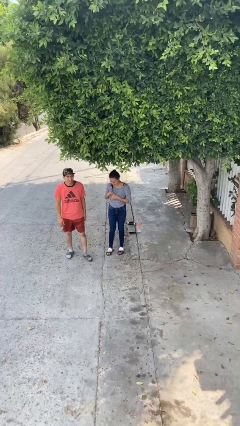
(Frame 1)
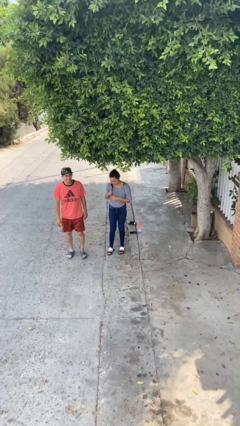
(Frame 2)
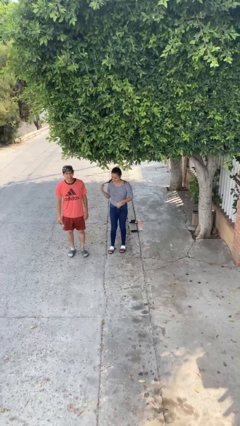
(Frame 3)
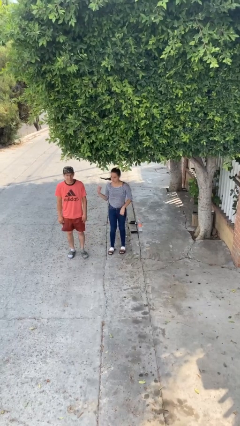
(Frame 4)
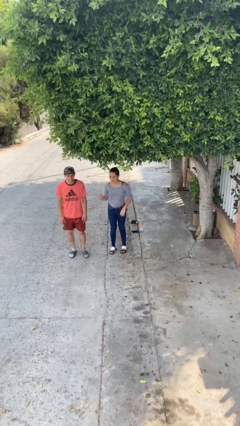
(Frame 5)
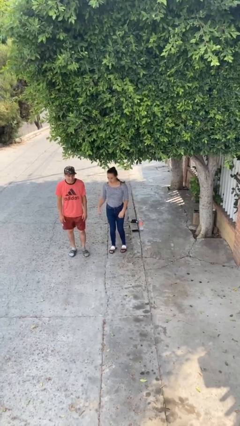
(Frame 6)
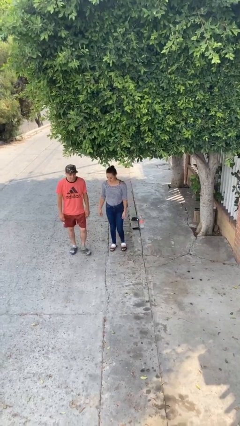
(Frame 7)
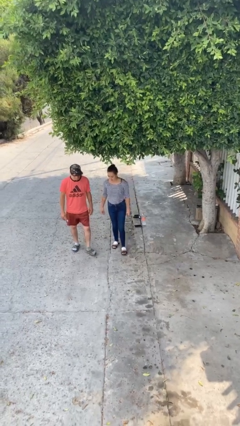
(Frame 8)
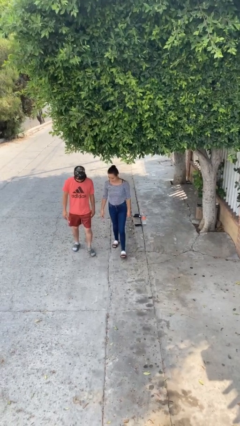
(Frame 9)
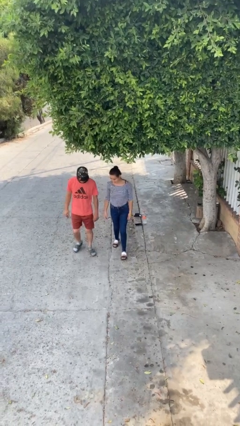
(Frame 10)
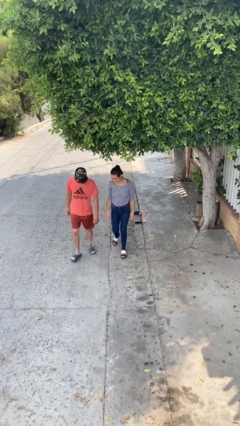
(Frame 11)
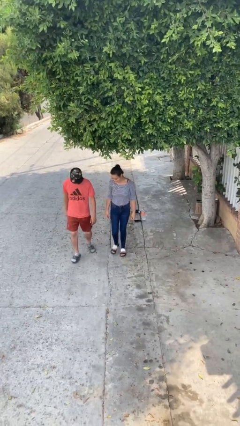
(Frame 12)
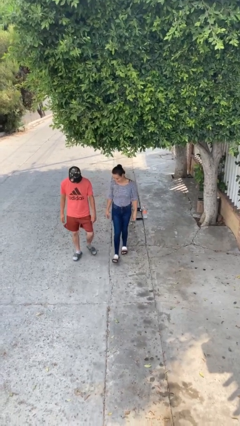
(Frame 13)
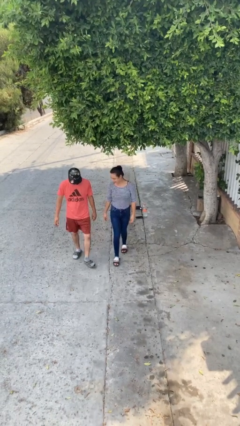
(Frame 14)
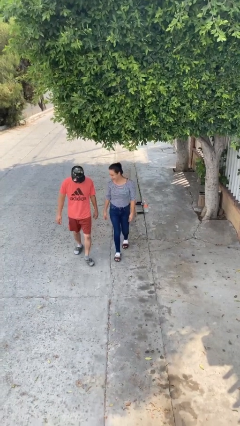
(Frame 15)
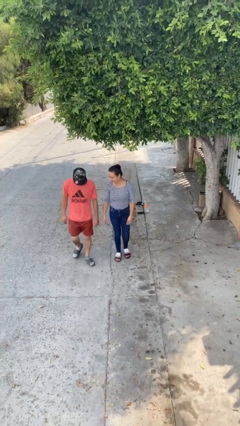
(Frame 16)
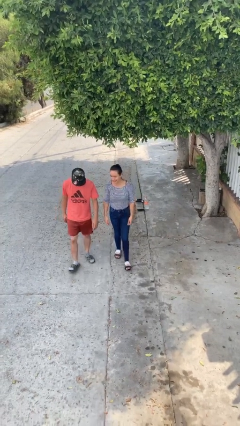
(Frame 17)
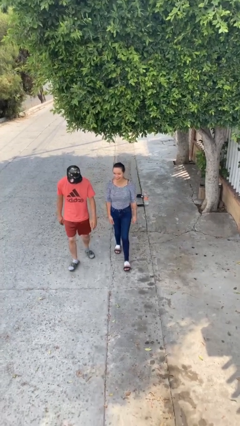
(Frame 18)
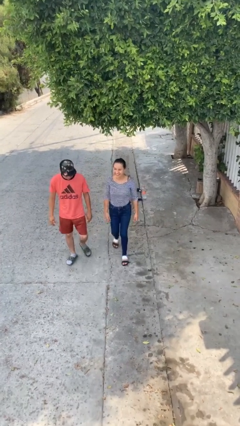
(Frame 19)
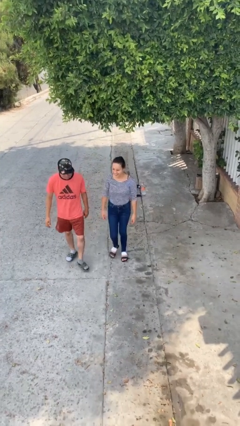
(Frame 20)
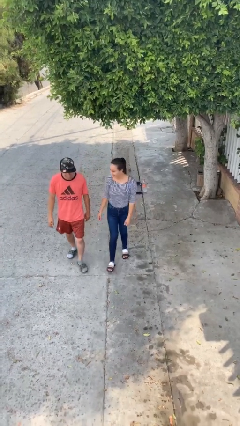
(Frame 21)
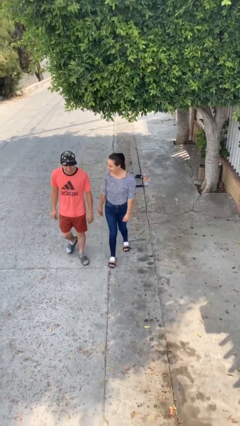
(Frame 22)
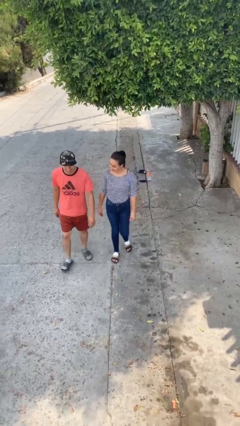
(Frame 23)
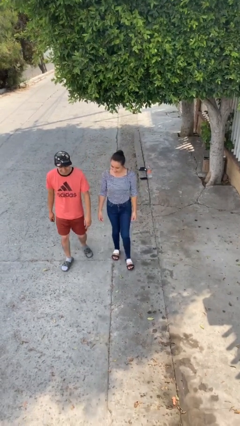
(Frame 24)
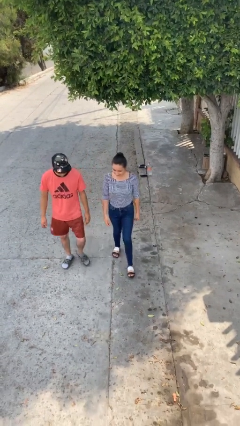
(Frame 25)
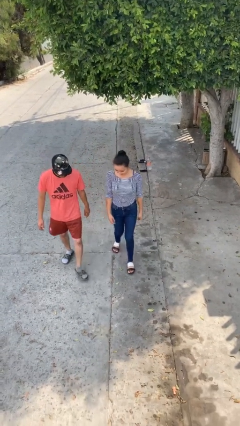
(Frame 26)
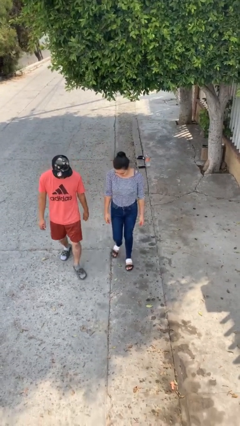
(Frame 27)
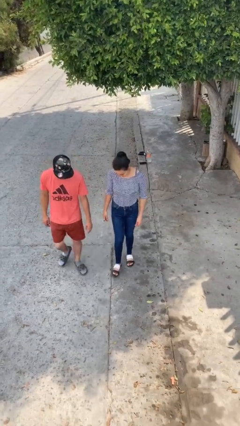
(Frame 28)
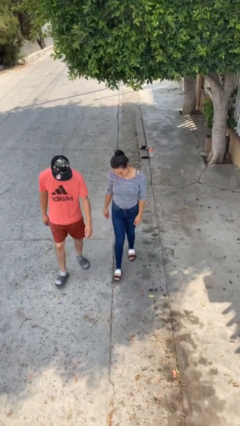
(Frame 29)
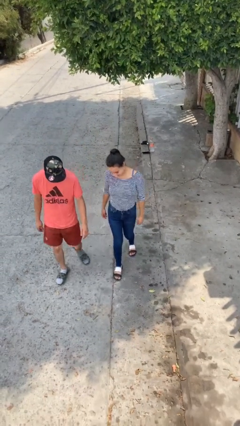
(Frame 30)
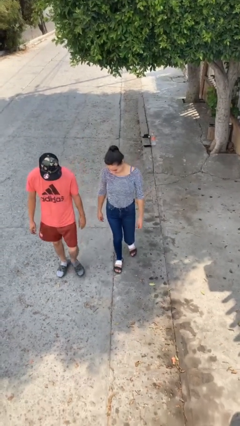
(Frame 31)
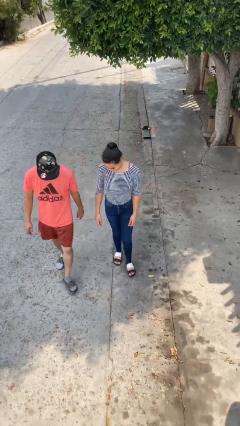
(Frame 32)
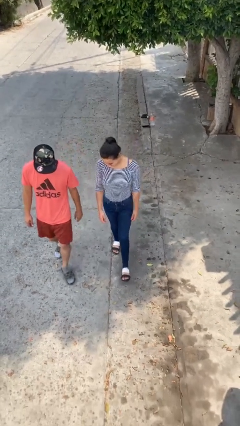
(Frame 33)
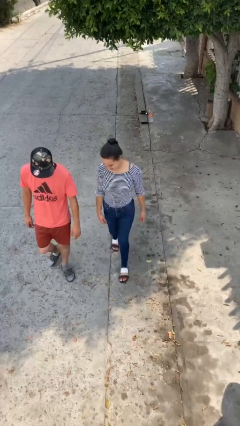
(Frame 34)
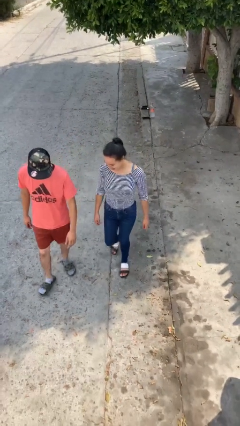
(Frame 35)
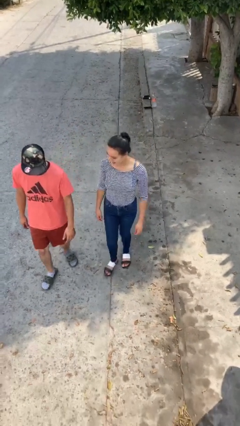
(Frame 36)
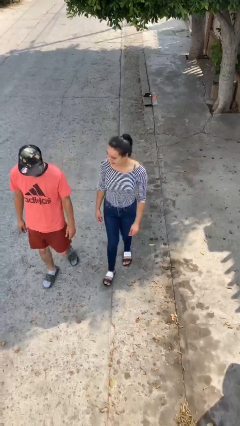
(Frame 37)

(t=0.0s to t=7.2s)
person talks to person

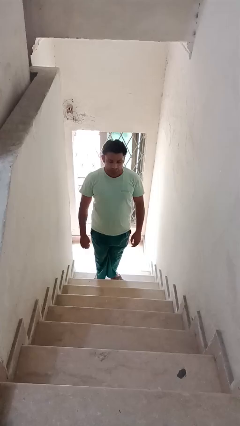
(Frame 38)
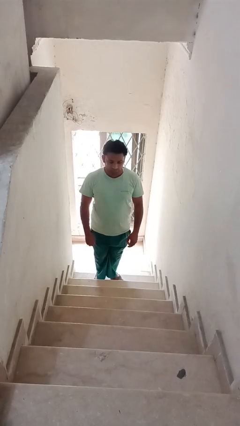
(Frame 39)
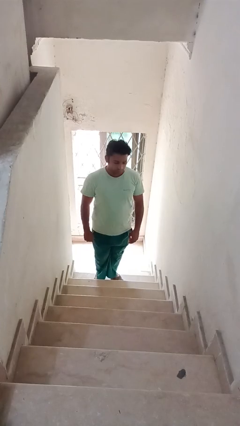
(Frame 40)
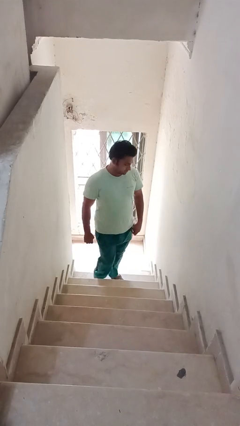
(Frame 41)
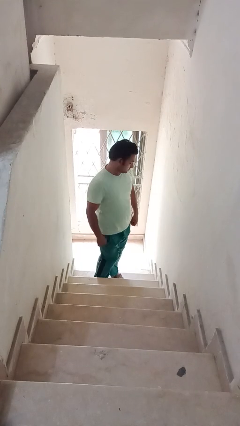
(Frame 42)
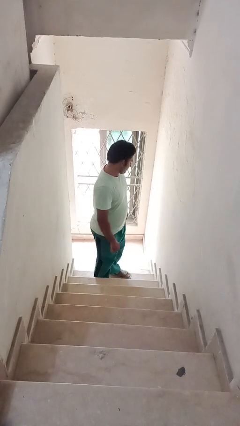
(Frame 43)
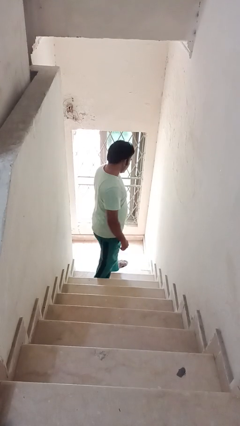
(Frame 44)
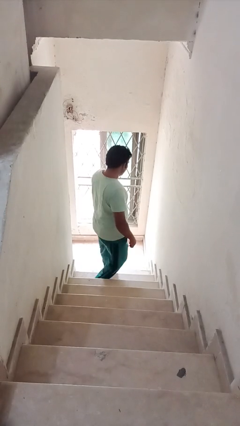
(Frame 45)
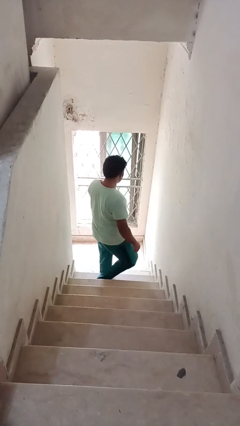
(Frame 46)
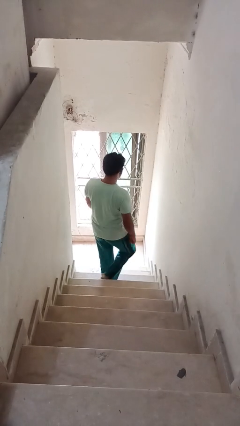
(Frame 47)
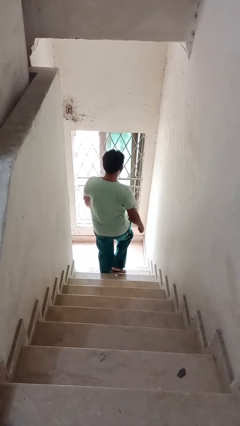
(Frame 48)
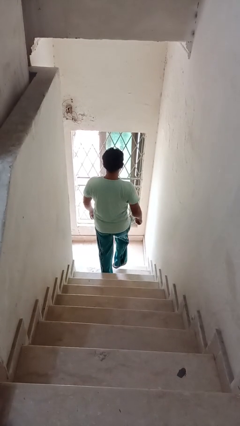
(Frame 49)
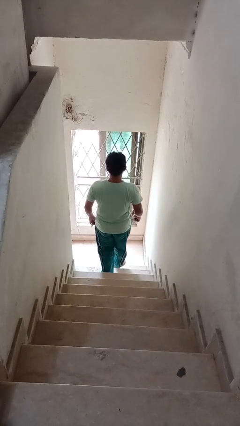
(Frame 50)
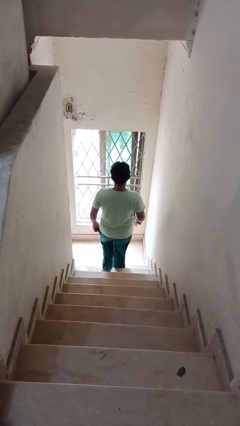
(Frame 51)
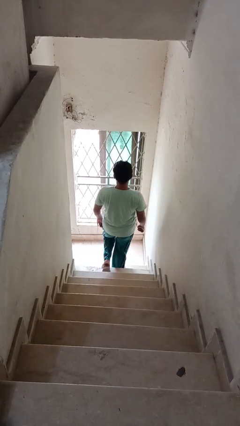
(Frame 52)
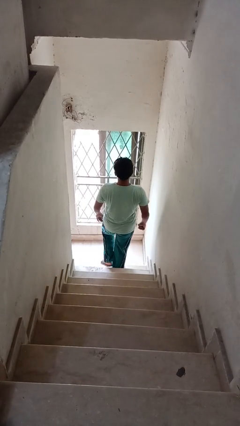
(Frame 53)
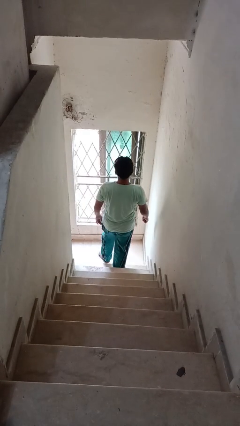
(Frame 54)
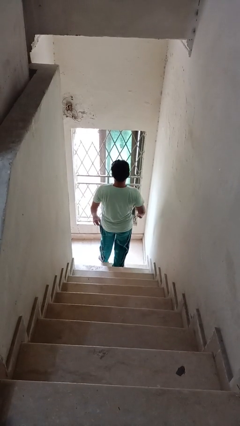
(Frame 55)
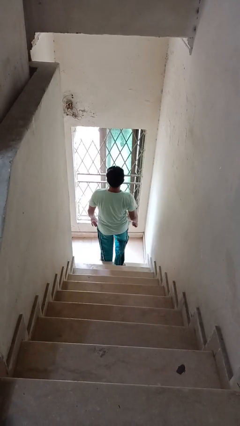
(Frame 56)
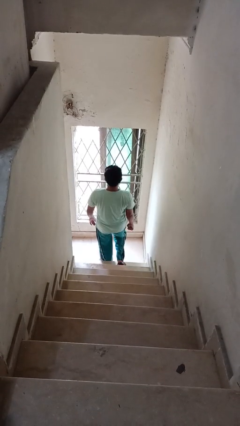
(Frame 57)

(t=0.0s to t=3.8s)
person climbs down stairs

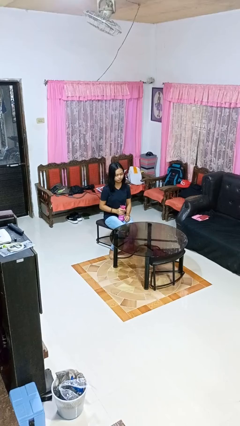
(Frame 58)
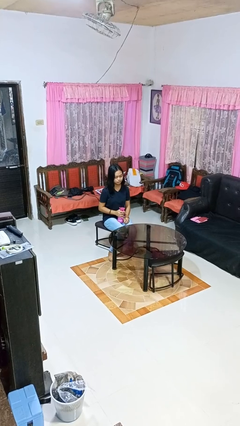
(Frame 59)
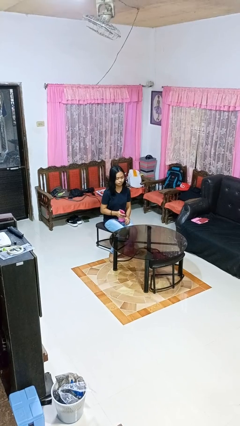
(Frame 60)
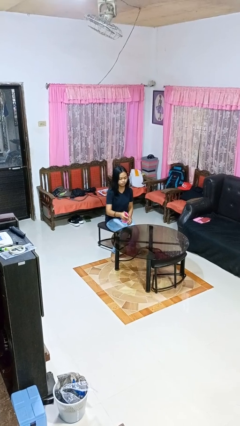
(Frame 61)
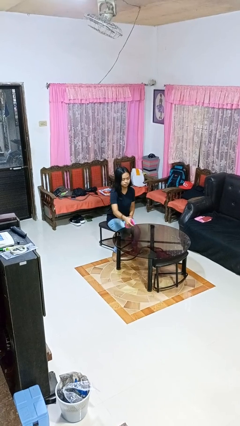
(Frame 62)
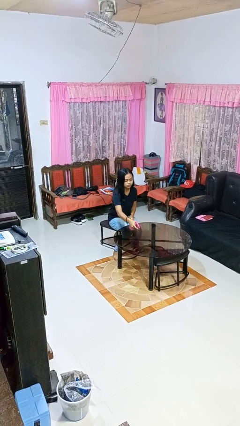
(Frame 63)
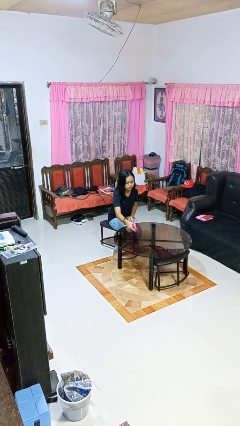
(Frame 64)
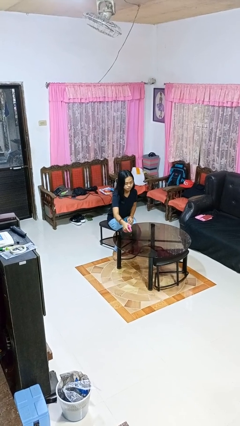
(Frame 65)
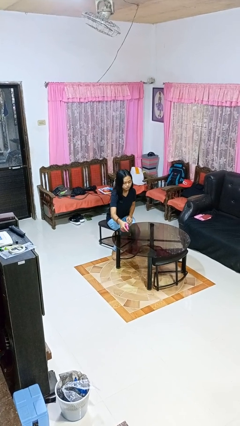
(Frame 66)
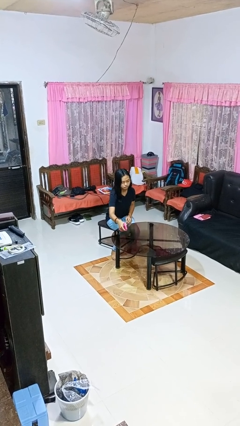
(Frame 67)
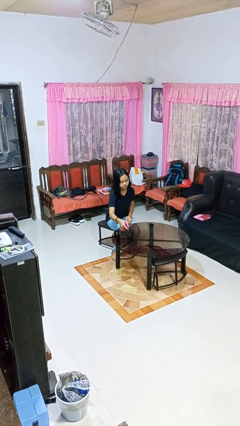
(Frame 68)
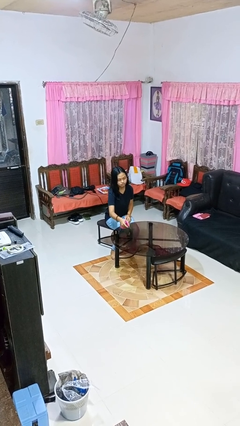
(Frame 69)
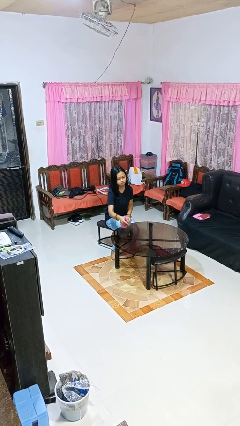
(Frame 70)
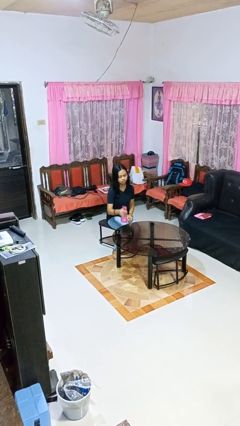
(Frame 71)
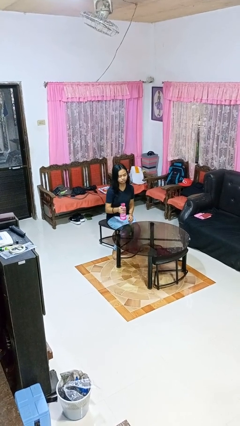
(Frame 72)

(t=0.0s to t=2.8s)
person sprays from bottle

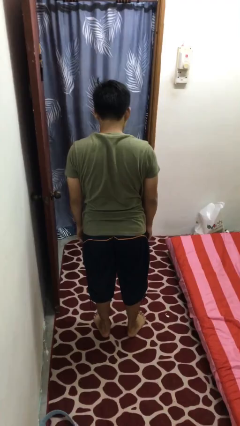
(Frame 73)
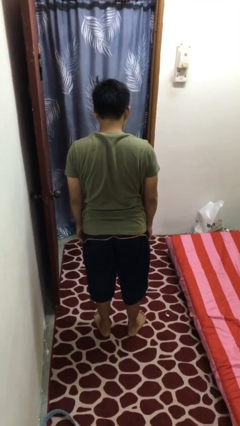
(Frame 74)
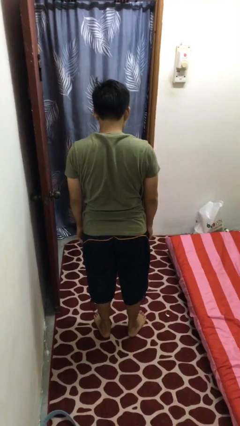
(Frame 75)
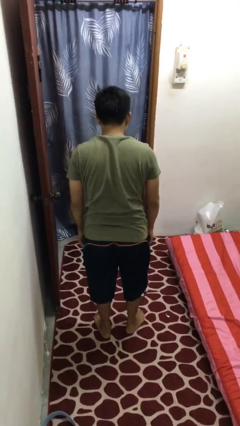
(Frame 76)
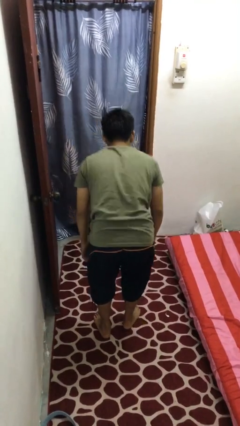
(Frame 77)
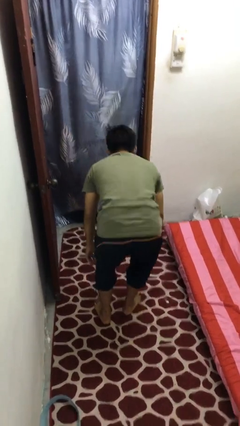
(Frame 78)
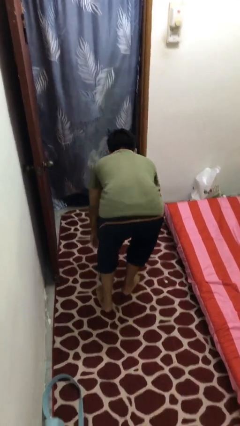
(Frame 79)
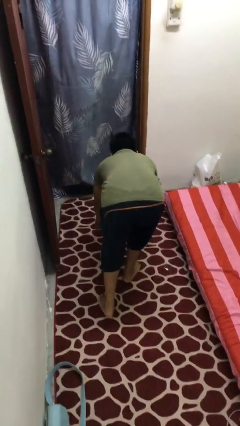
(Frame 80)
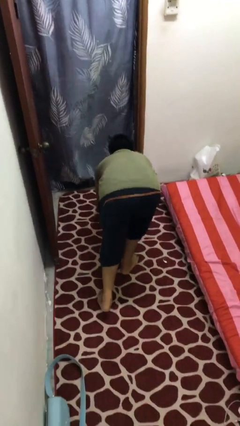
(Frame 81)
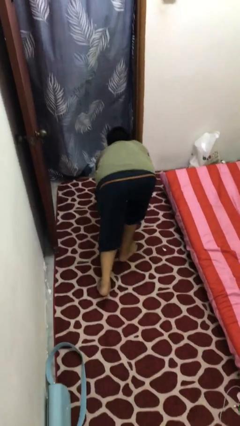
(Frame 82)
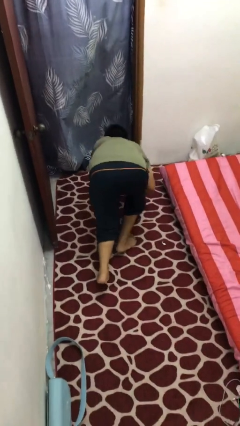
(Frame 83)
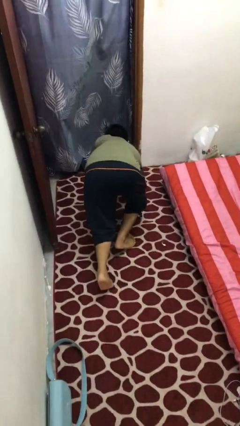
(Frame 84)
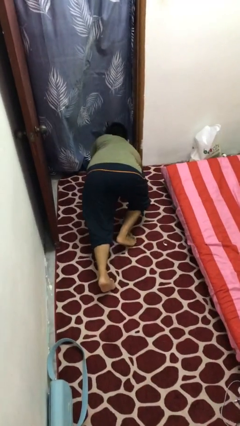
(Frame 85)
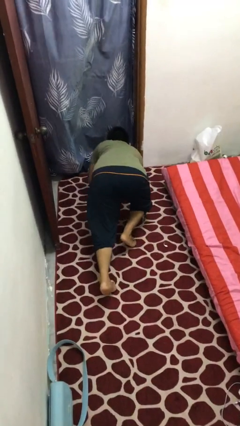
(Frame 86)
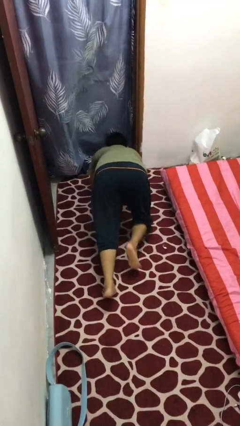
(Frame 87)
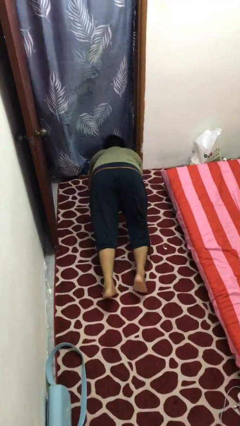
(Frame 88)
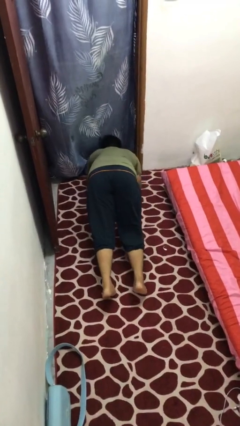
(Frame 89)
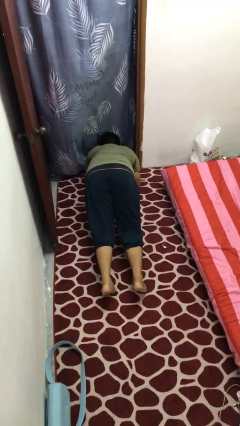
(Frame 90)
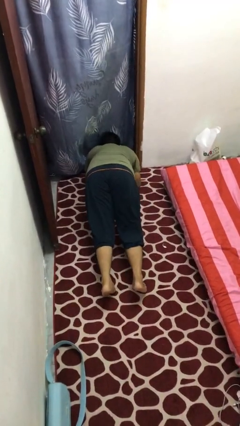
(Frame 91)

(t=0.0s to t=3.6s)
person exercises with plank

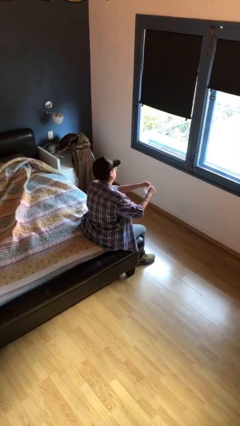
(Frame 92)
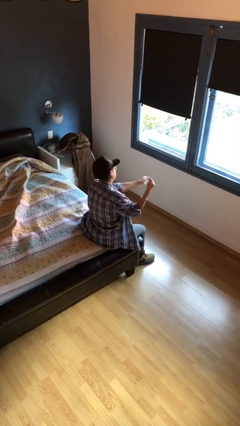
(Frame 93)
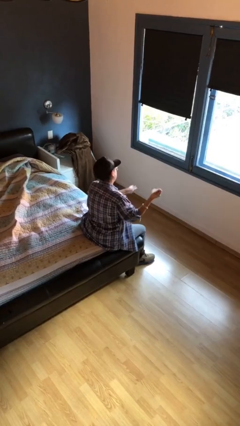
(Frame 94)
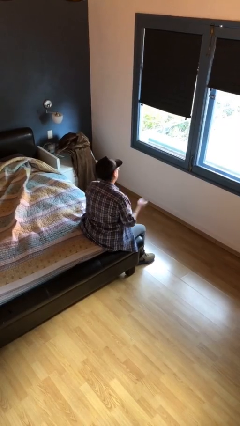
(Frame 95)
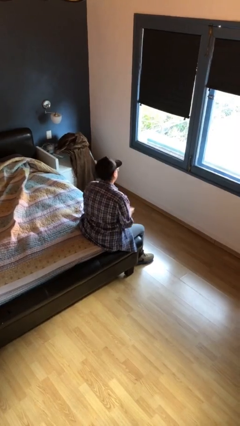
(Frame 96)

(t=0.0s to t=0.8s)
person tears paper
